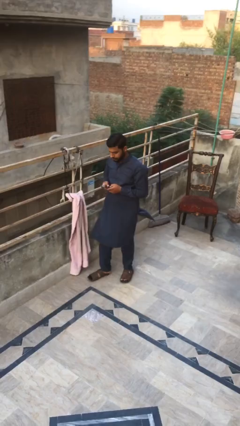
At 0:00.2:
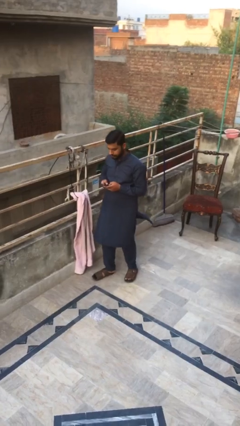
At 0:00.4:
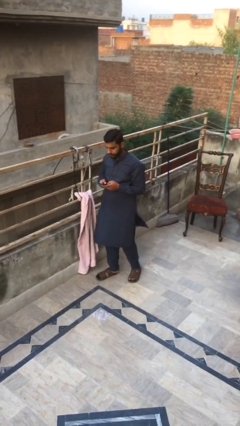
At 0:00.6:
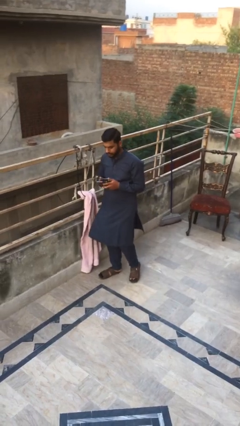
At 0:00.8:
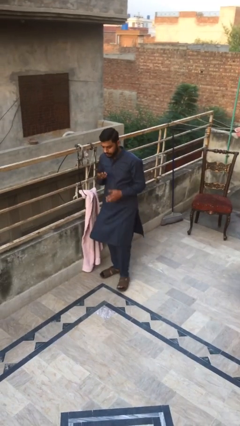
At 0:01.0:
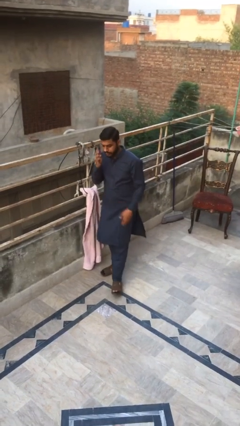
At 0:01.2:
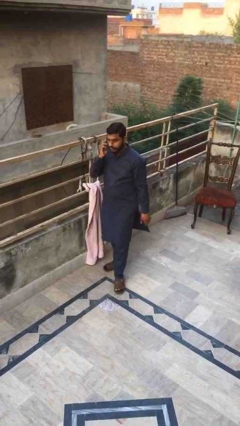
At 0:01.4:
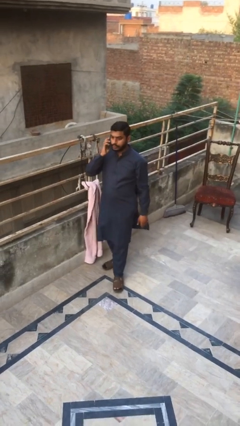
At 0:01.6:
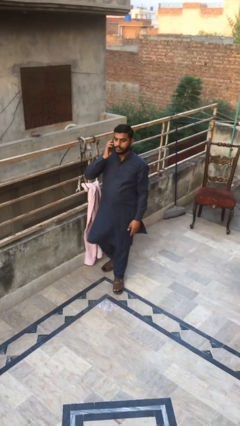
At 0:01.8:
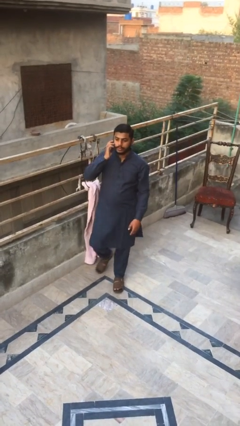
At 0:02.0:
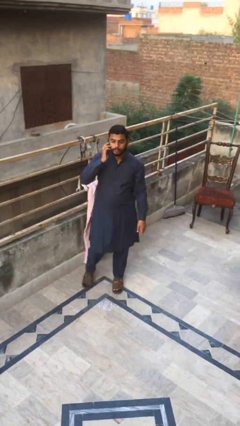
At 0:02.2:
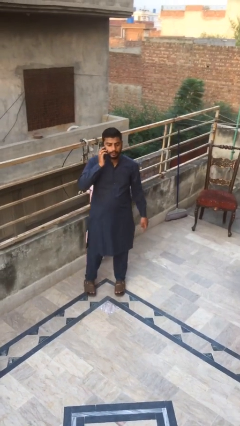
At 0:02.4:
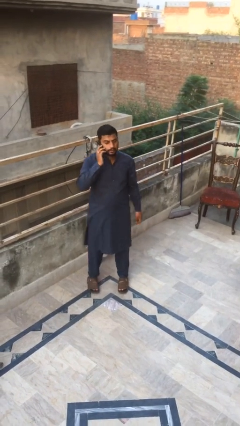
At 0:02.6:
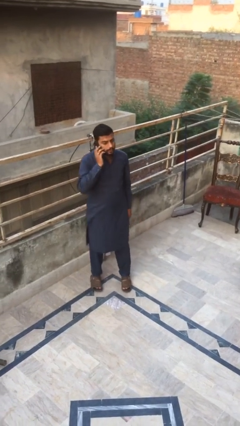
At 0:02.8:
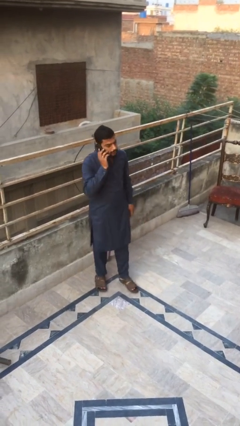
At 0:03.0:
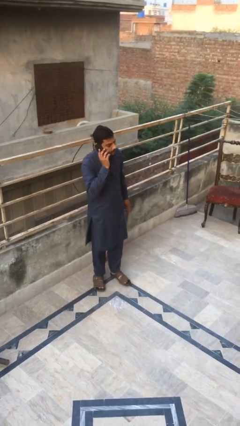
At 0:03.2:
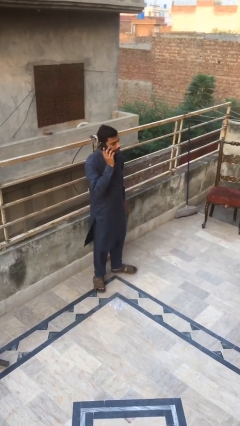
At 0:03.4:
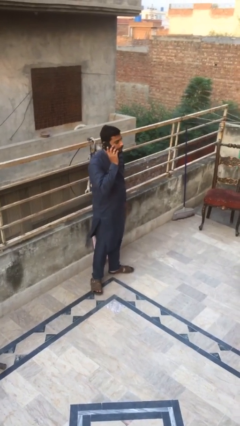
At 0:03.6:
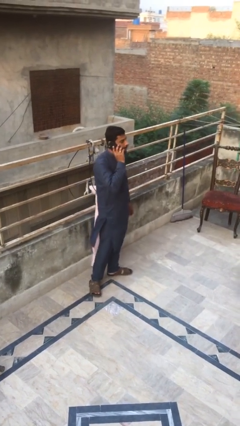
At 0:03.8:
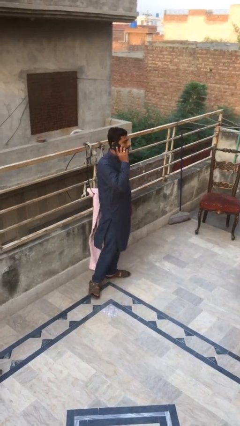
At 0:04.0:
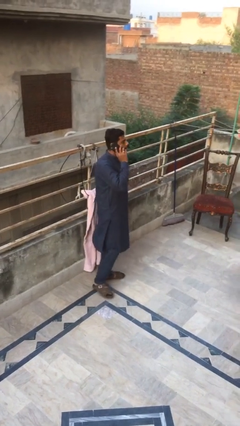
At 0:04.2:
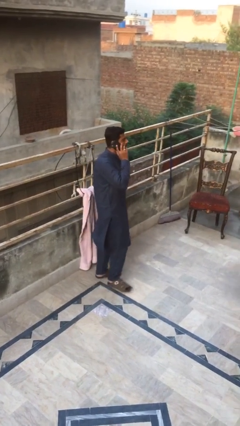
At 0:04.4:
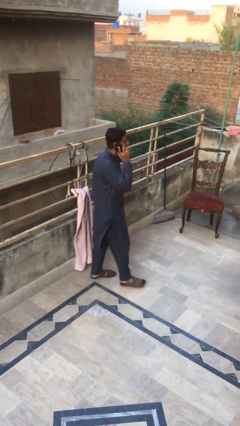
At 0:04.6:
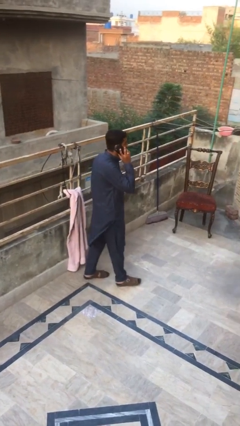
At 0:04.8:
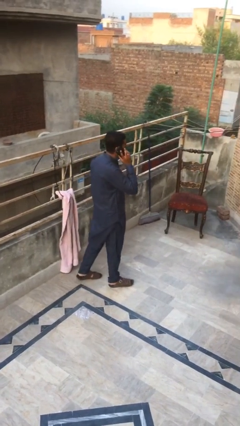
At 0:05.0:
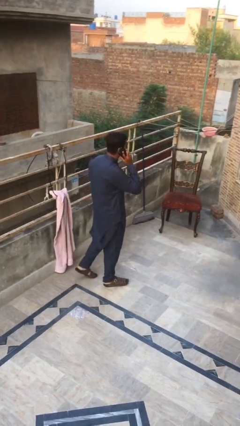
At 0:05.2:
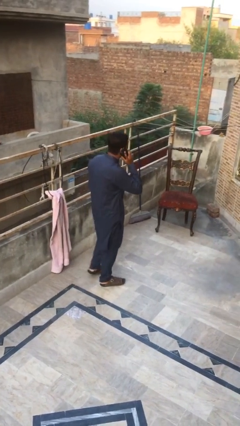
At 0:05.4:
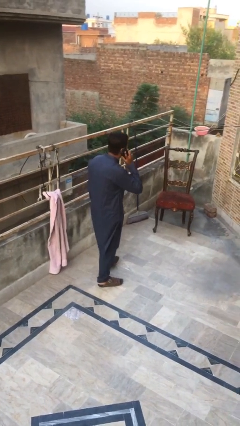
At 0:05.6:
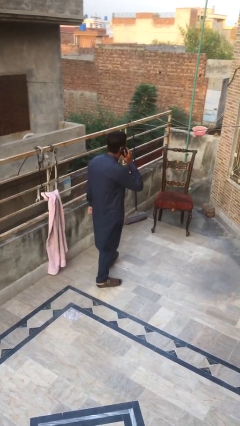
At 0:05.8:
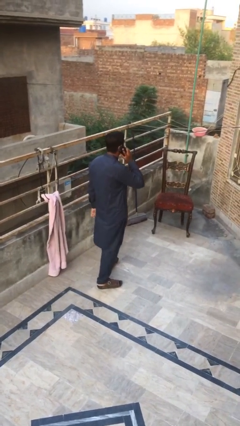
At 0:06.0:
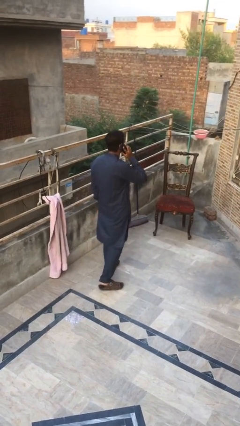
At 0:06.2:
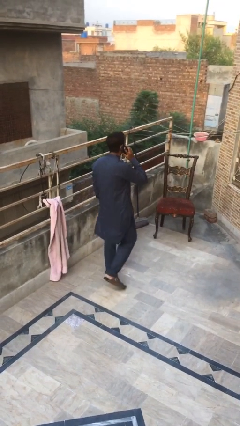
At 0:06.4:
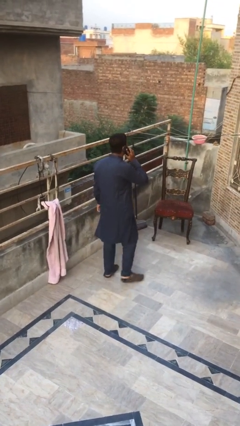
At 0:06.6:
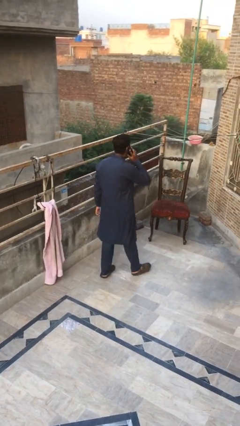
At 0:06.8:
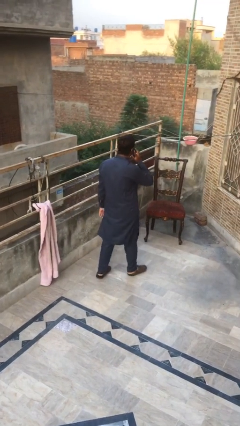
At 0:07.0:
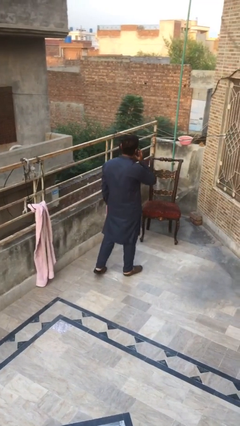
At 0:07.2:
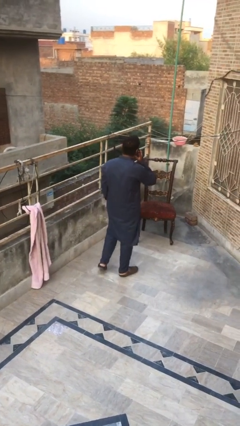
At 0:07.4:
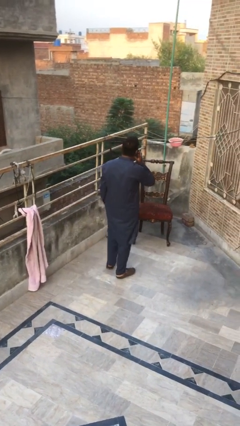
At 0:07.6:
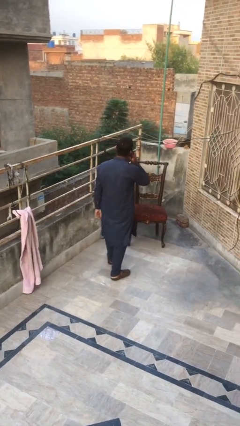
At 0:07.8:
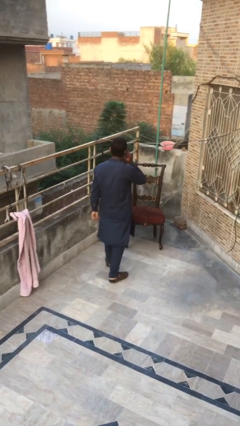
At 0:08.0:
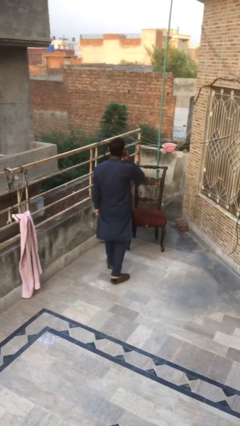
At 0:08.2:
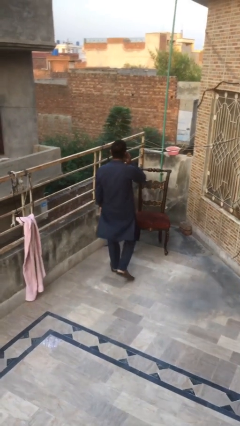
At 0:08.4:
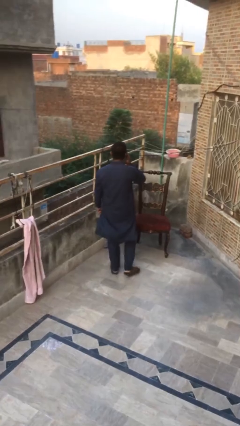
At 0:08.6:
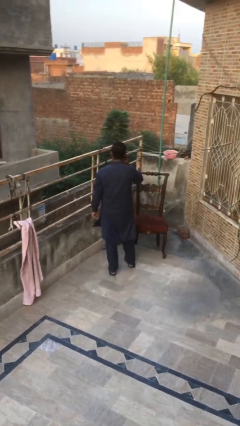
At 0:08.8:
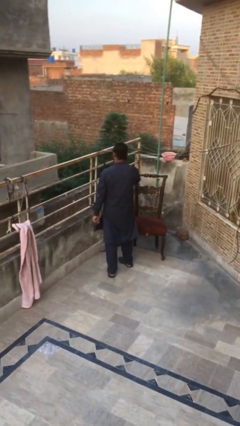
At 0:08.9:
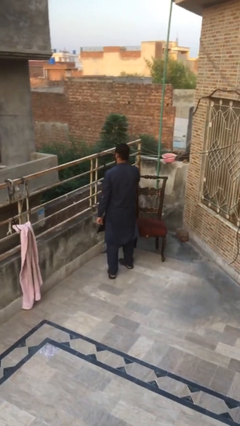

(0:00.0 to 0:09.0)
person talks on phone

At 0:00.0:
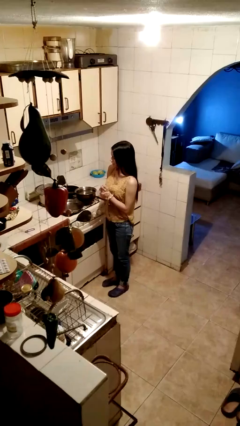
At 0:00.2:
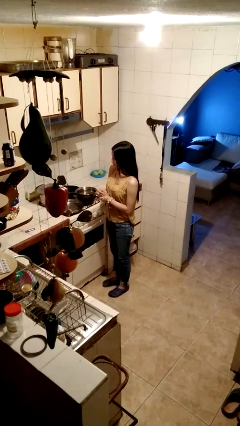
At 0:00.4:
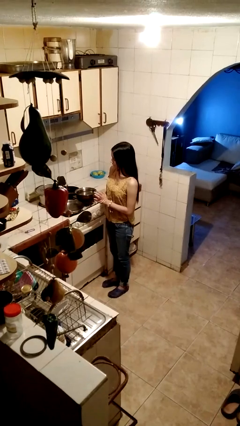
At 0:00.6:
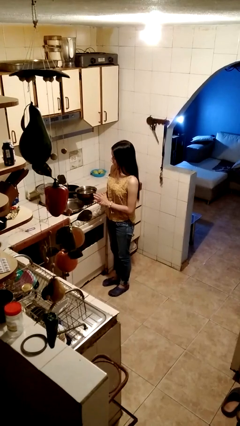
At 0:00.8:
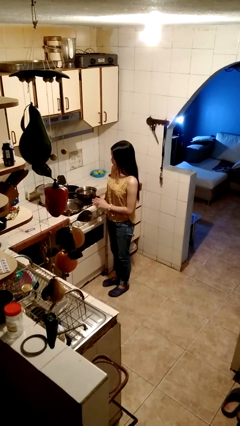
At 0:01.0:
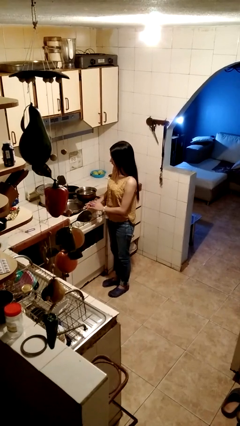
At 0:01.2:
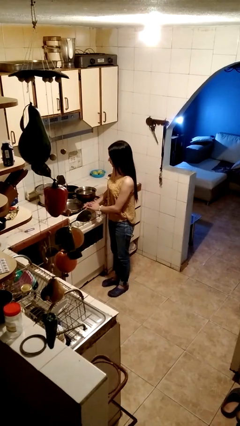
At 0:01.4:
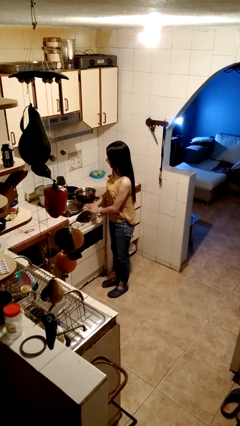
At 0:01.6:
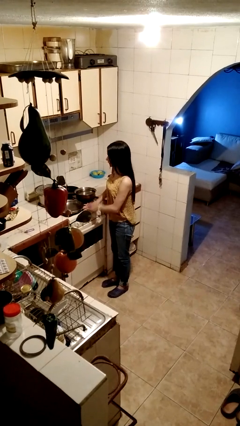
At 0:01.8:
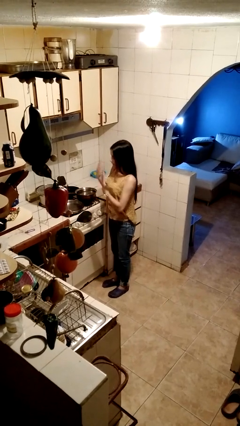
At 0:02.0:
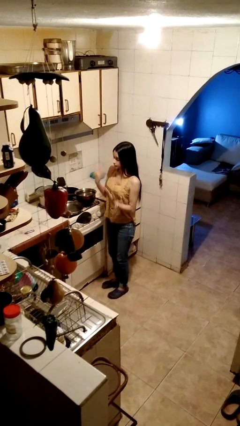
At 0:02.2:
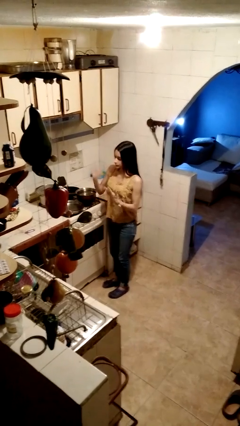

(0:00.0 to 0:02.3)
person burns hand

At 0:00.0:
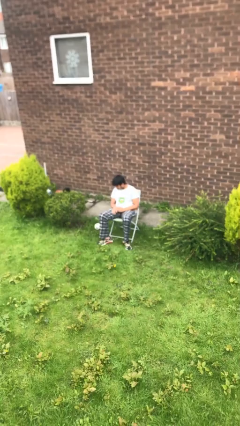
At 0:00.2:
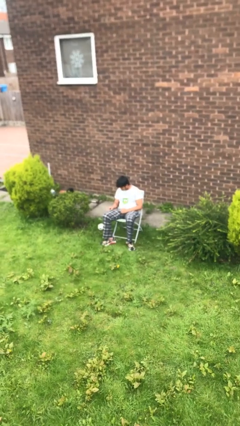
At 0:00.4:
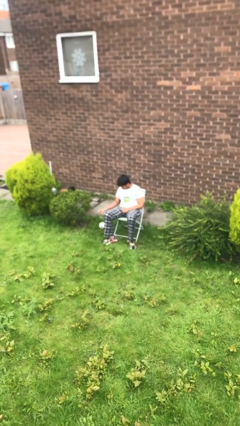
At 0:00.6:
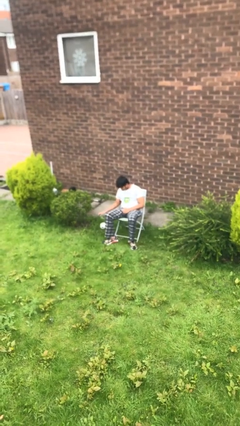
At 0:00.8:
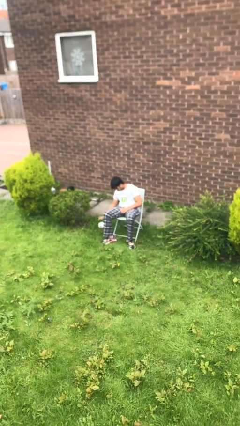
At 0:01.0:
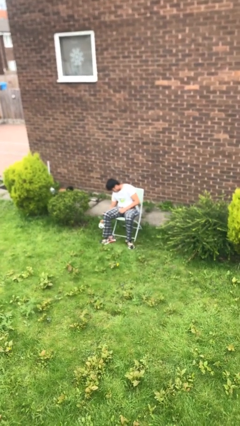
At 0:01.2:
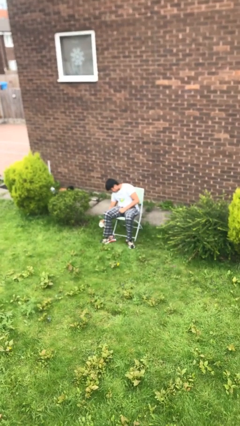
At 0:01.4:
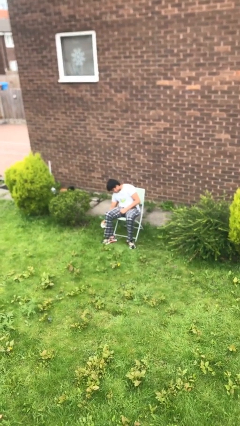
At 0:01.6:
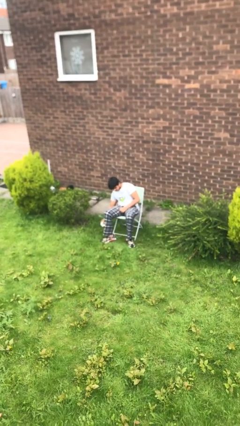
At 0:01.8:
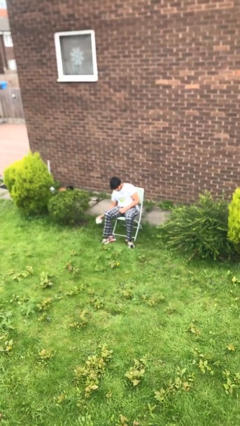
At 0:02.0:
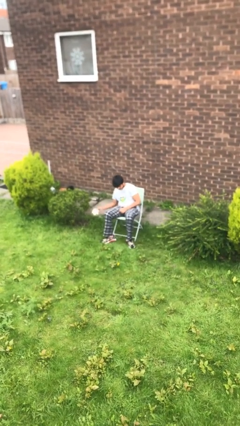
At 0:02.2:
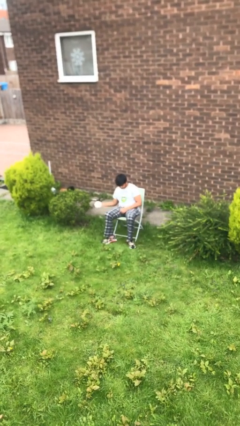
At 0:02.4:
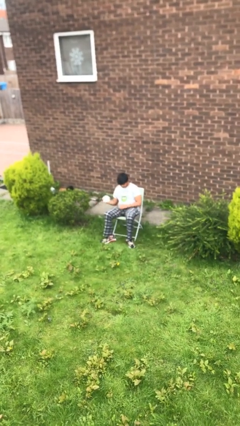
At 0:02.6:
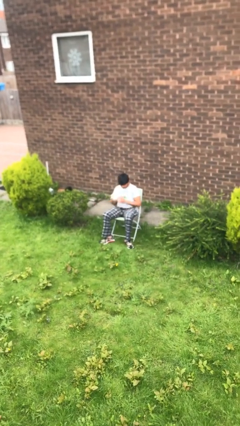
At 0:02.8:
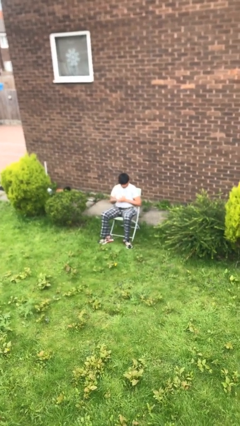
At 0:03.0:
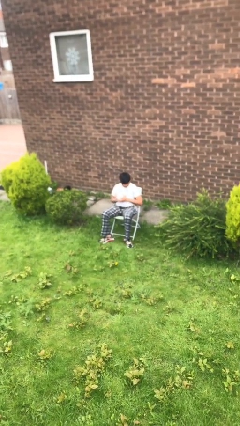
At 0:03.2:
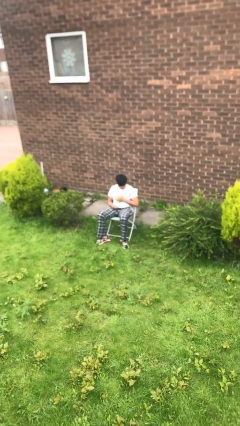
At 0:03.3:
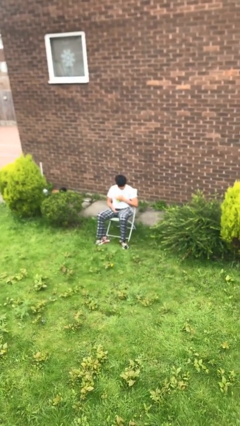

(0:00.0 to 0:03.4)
person picks up object from floor

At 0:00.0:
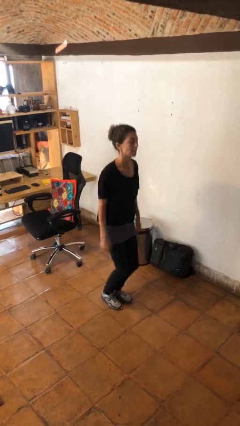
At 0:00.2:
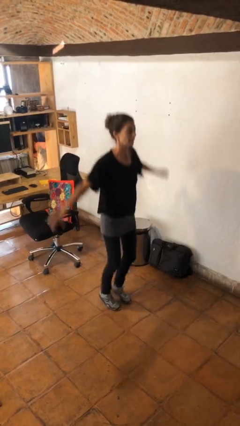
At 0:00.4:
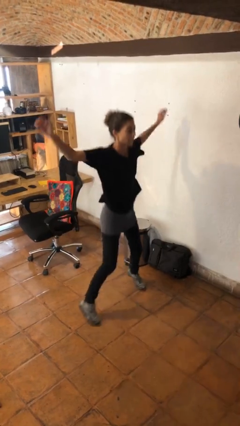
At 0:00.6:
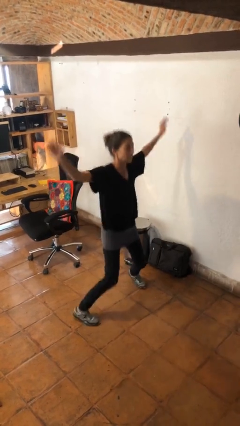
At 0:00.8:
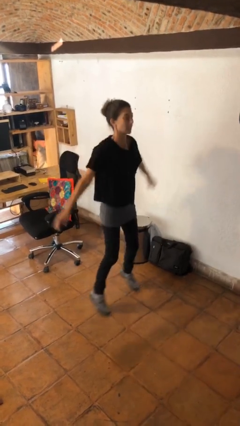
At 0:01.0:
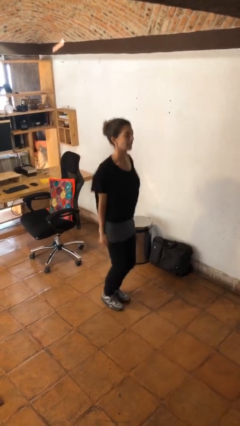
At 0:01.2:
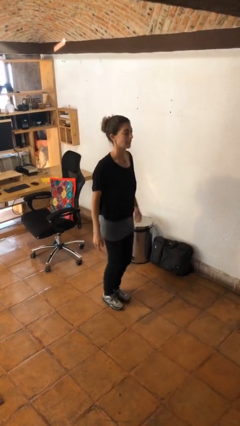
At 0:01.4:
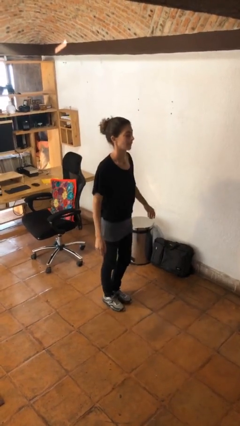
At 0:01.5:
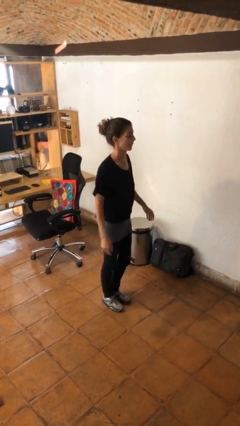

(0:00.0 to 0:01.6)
person exercises with jumping jacks

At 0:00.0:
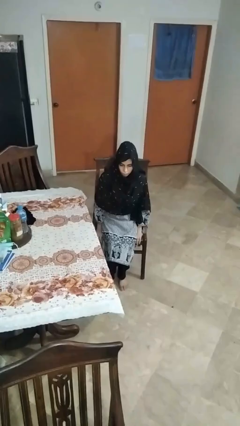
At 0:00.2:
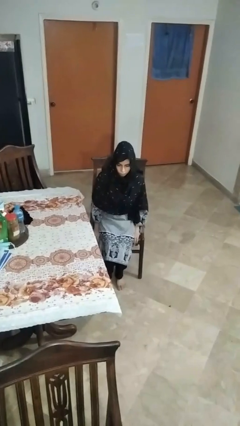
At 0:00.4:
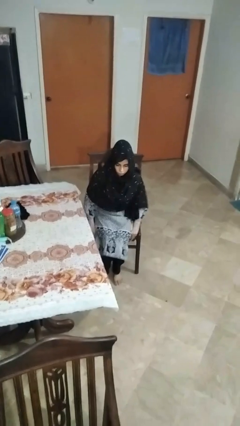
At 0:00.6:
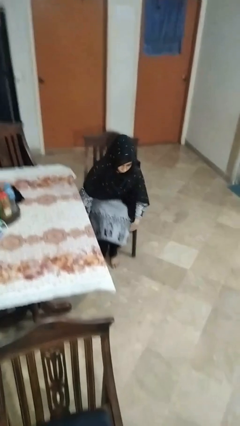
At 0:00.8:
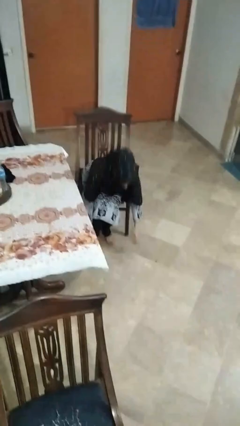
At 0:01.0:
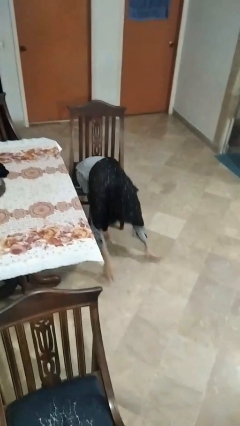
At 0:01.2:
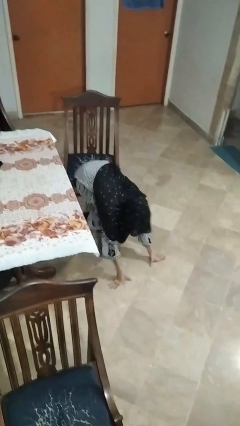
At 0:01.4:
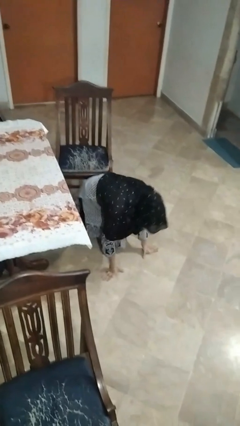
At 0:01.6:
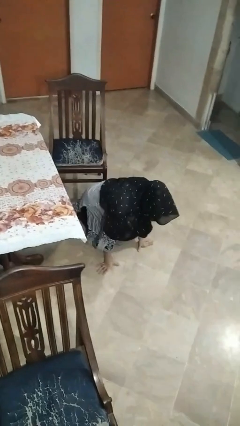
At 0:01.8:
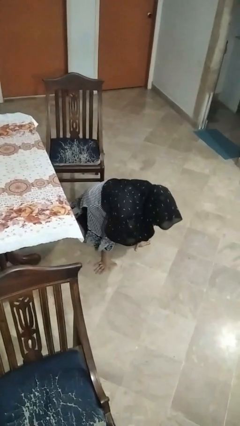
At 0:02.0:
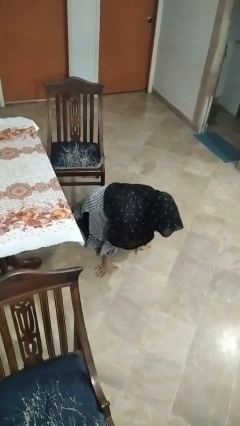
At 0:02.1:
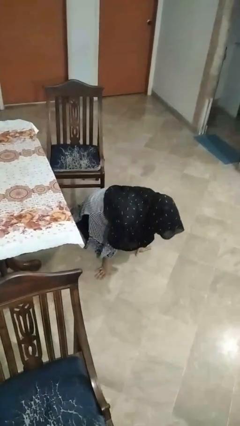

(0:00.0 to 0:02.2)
person falls from chair
